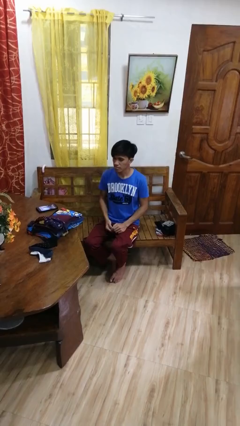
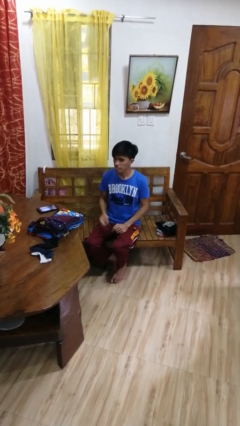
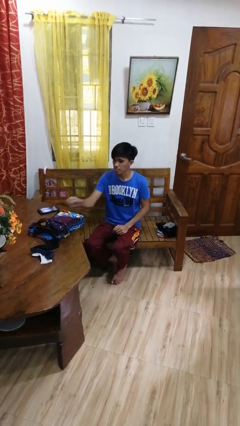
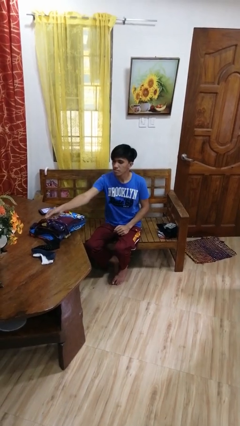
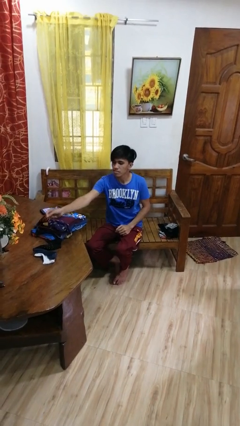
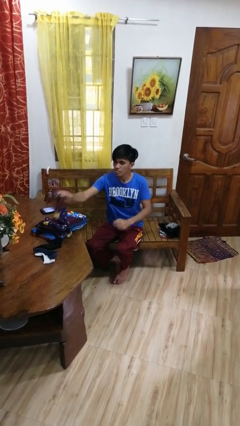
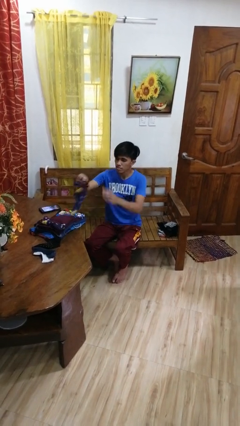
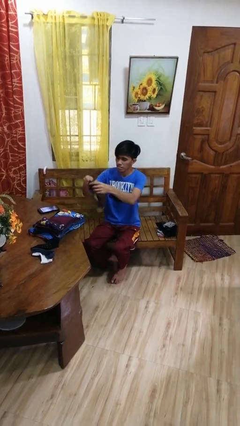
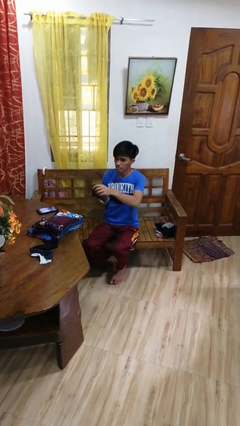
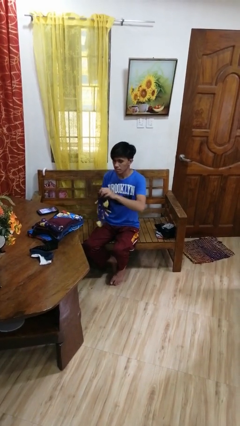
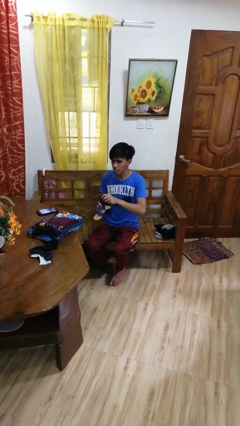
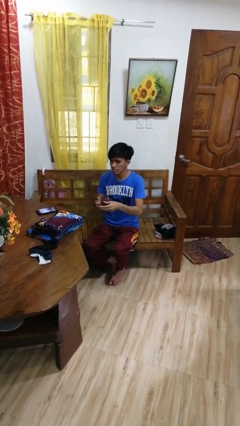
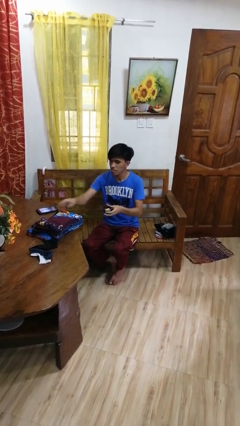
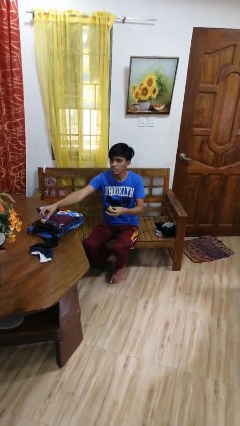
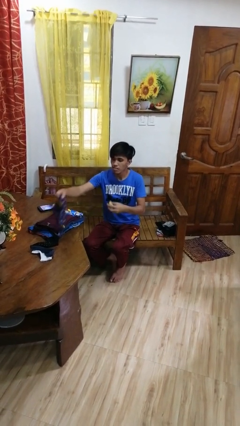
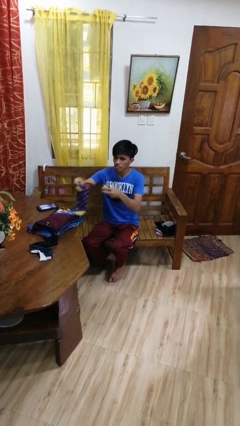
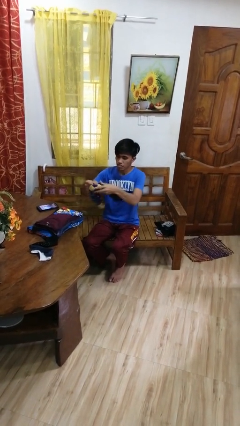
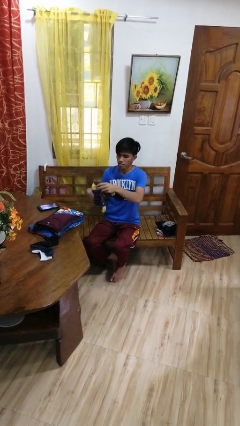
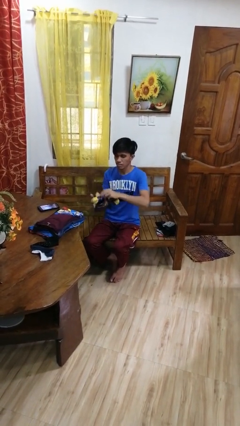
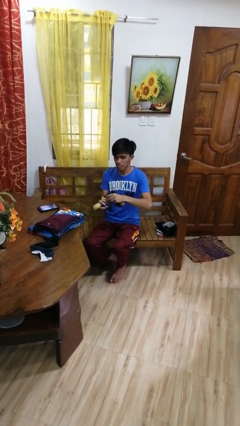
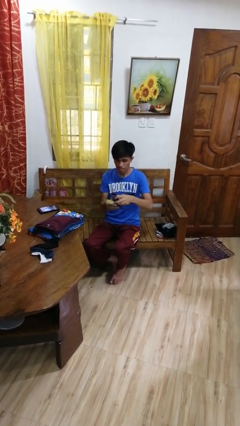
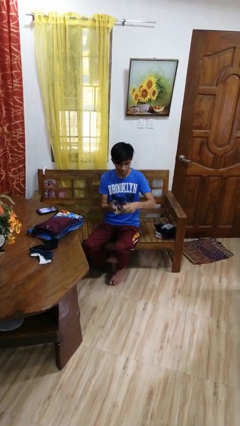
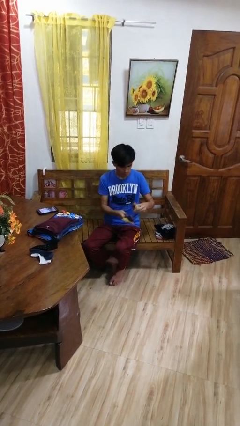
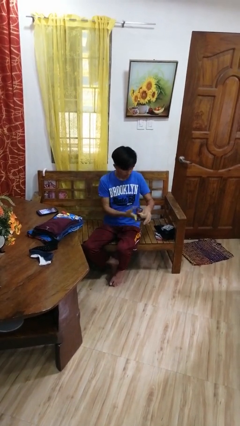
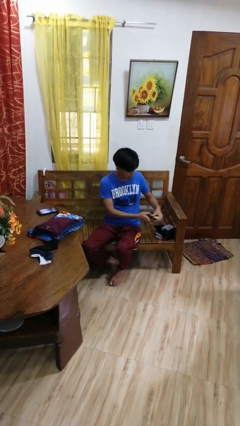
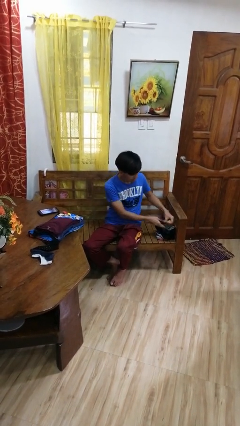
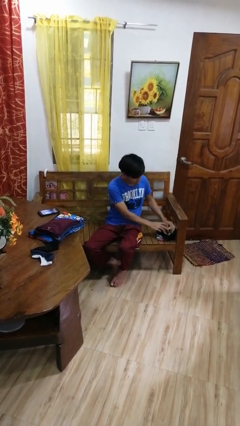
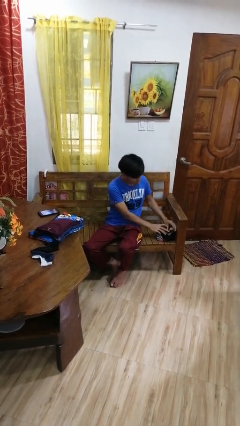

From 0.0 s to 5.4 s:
person folds socks

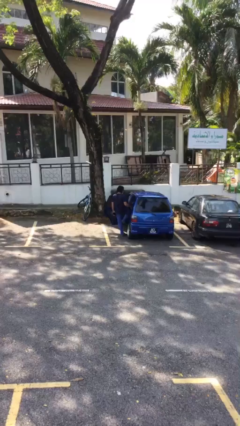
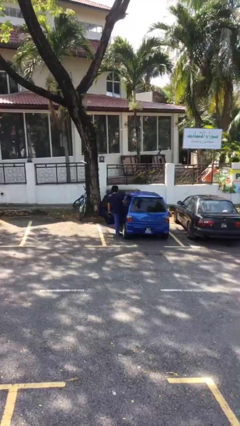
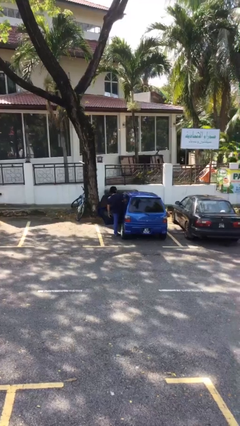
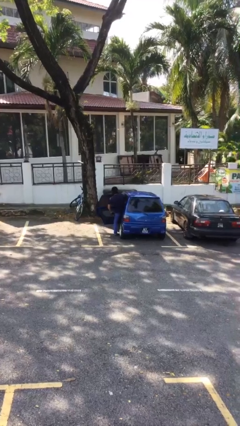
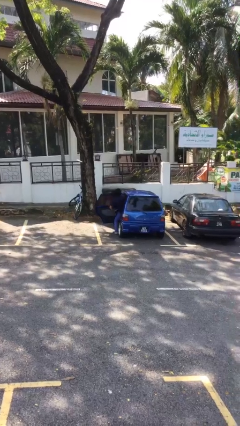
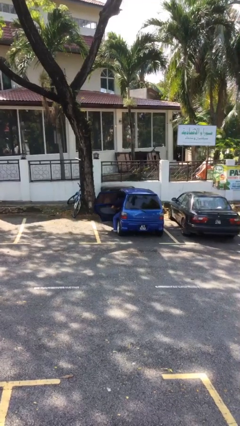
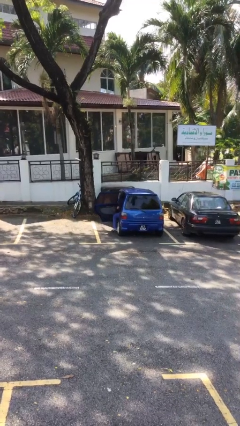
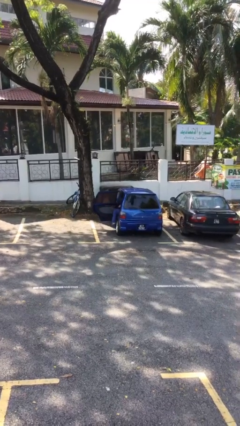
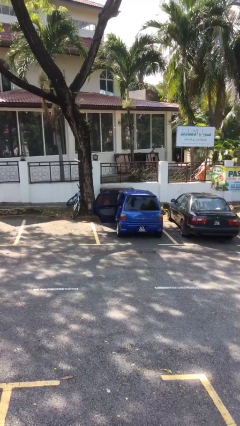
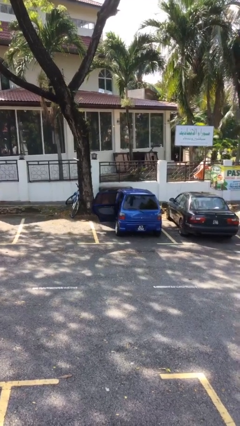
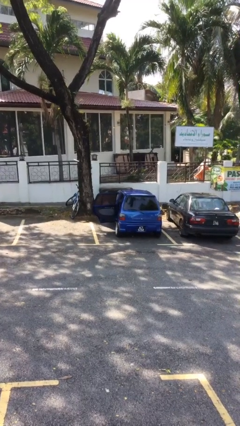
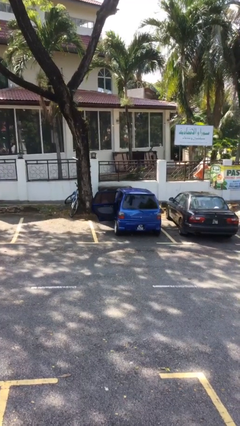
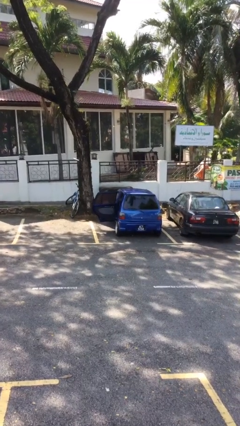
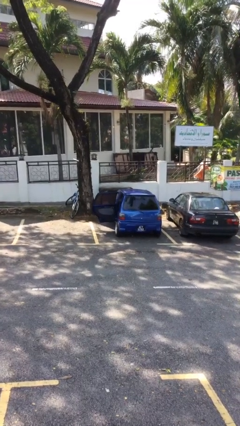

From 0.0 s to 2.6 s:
person enters car

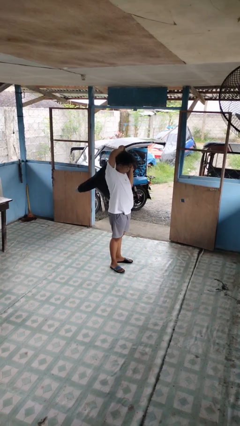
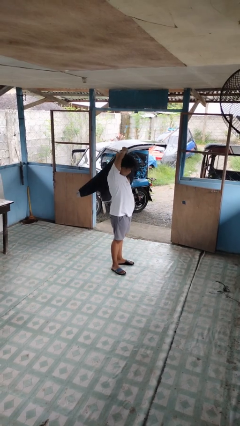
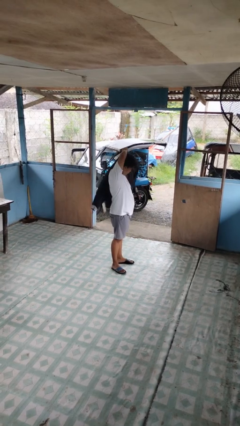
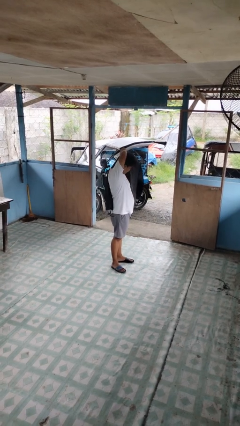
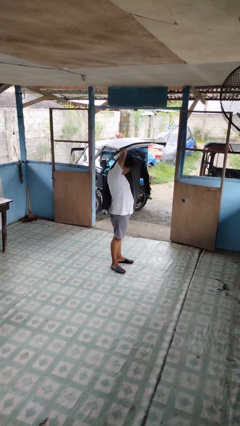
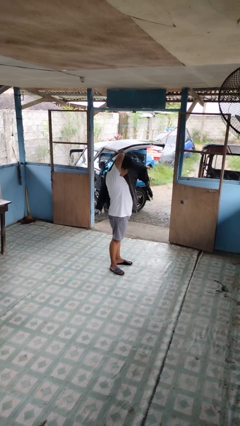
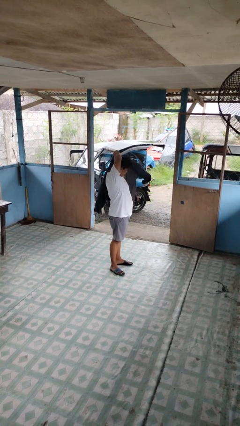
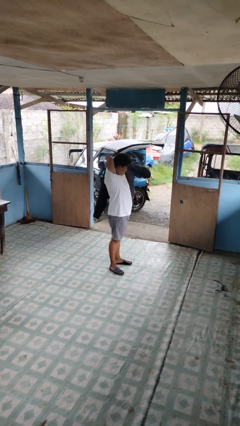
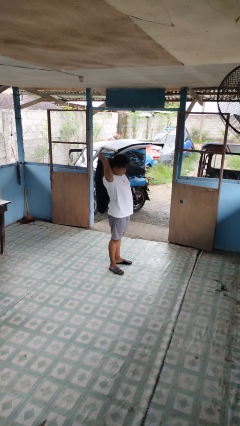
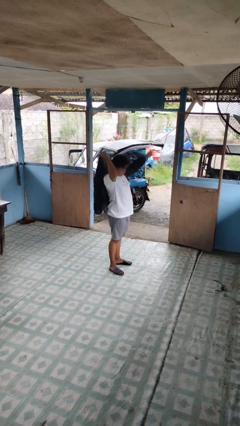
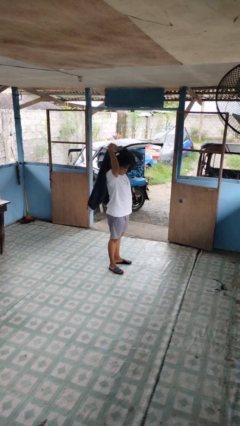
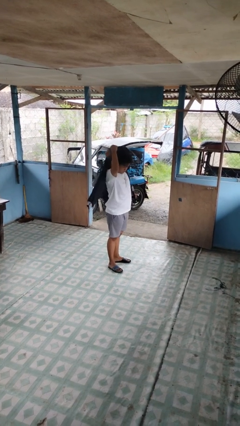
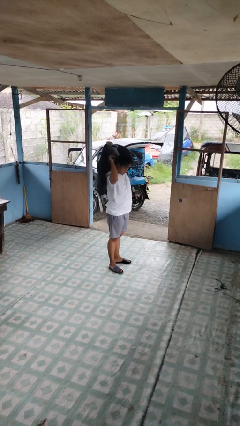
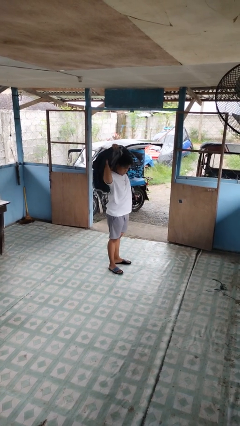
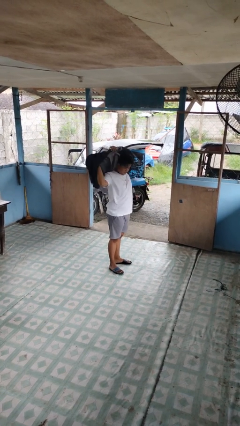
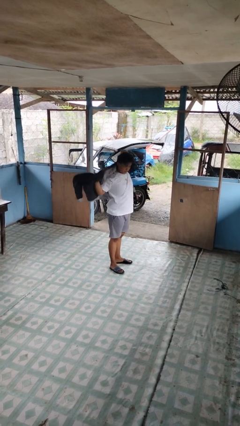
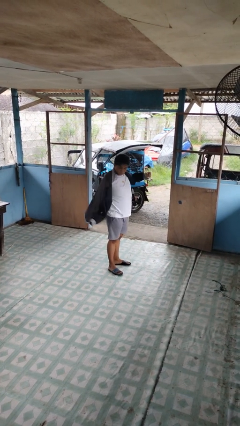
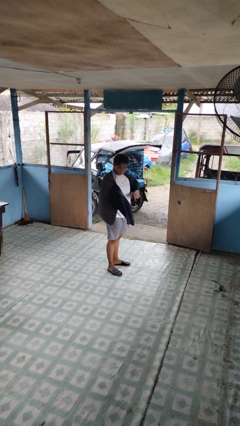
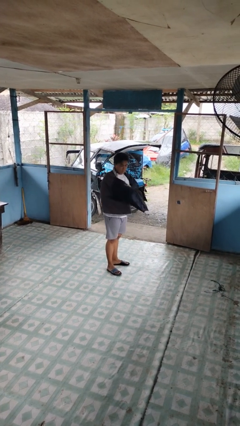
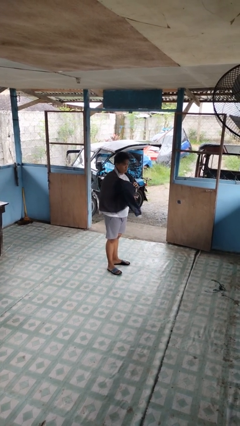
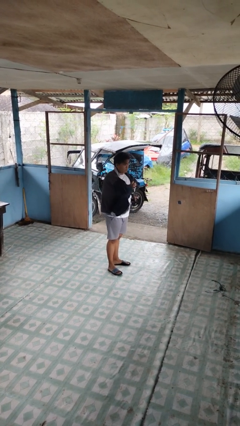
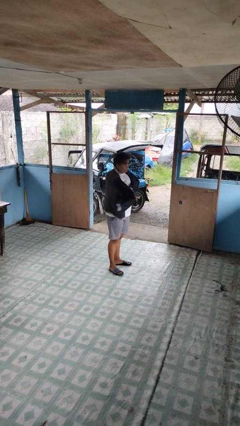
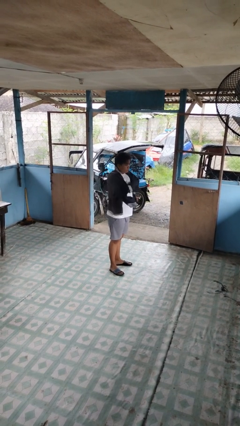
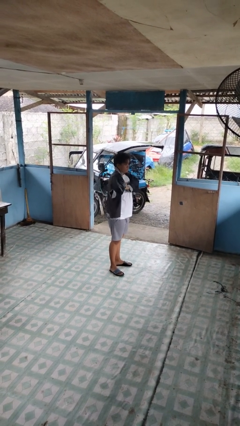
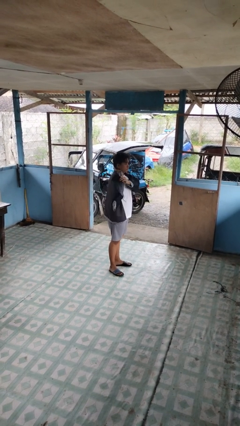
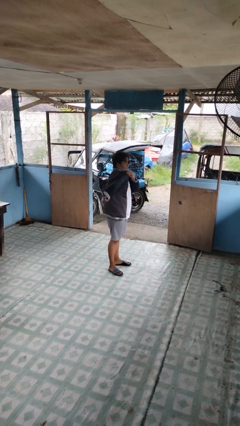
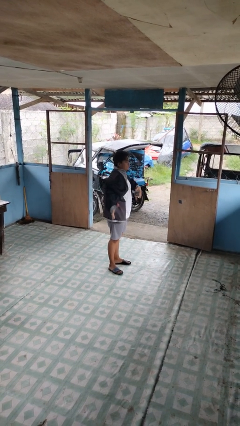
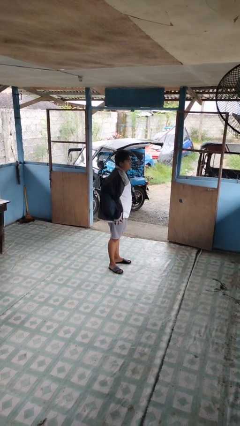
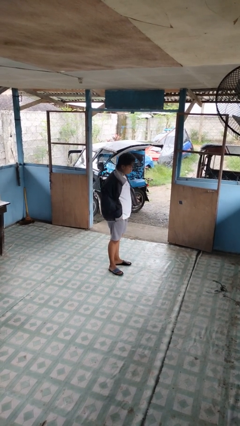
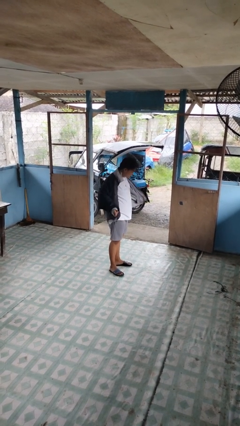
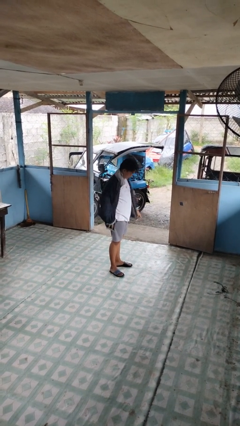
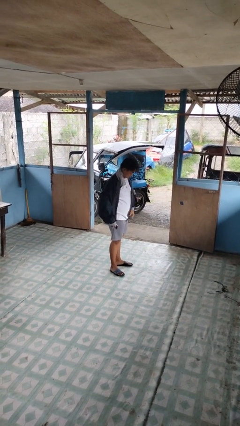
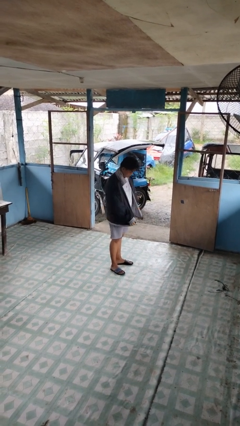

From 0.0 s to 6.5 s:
person puts on jacket

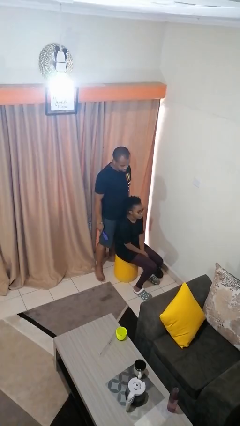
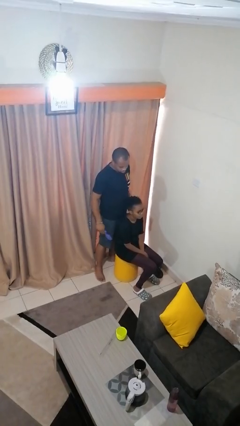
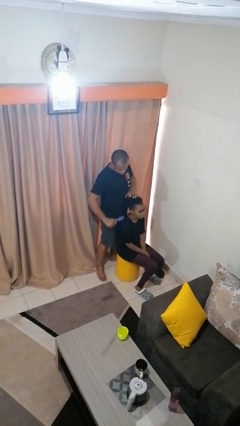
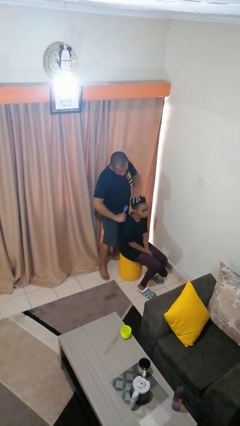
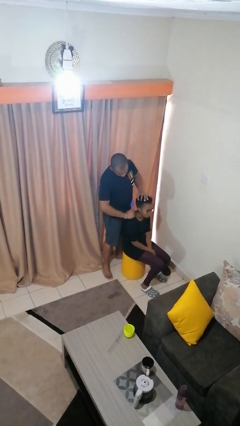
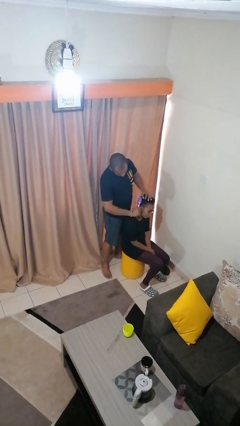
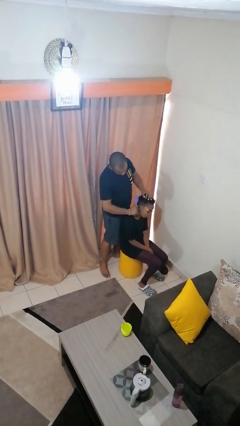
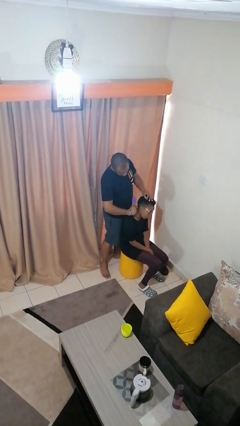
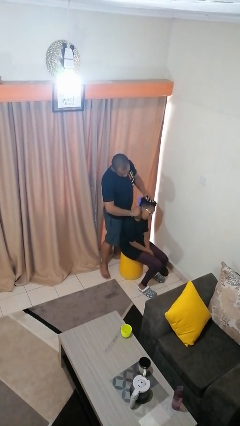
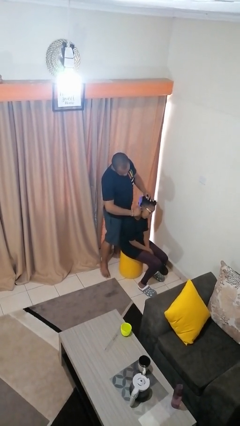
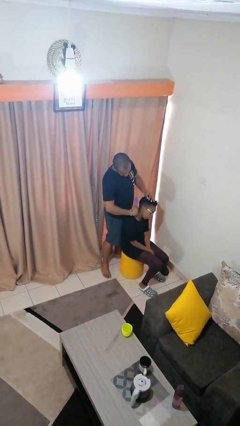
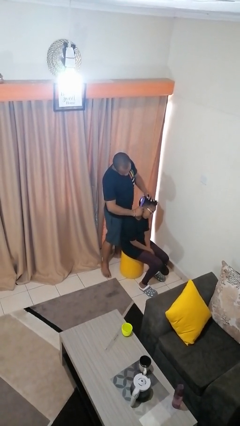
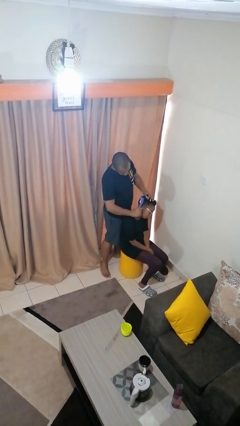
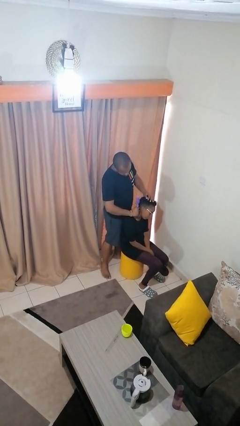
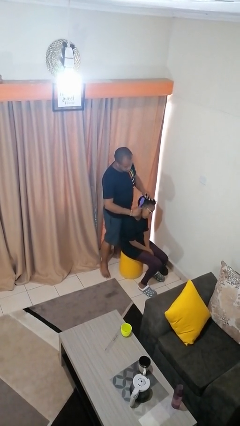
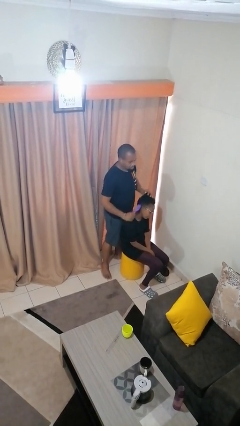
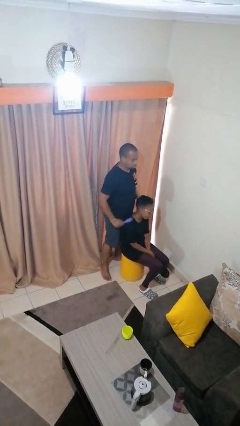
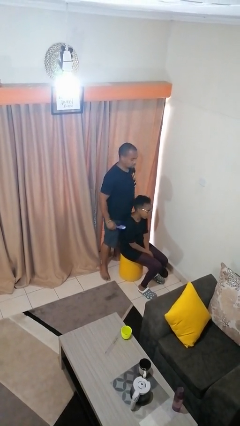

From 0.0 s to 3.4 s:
person brushes hair of person
